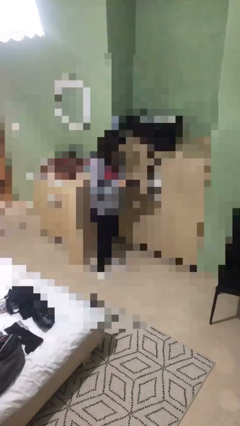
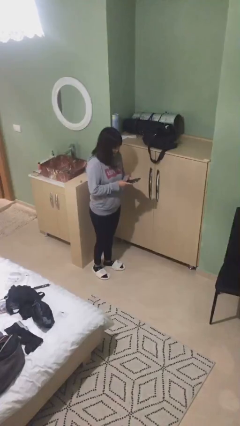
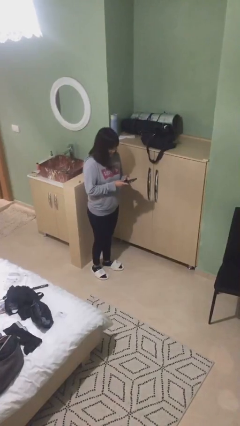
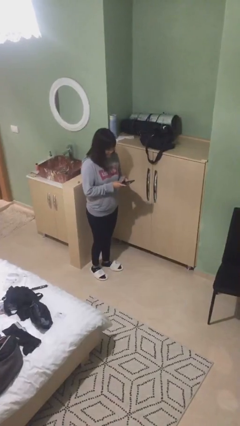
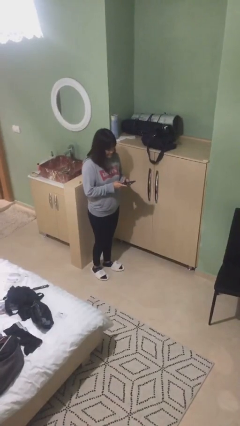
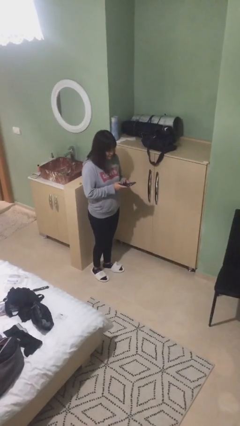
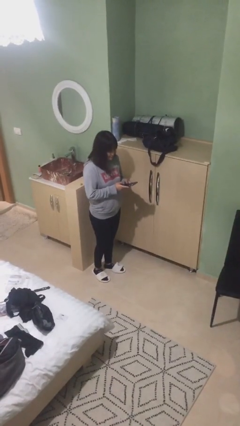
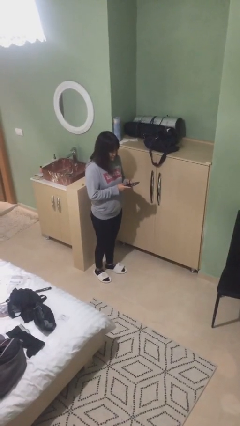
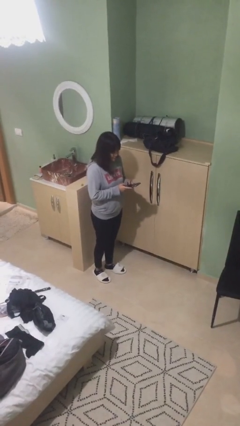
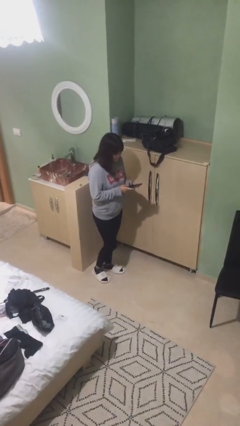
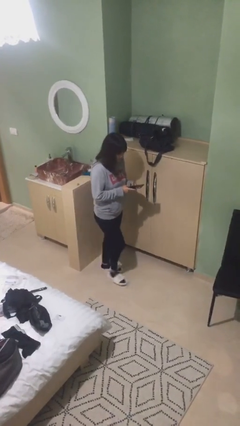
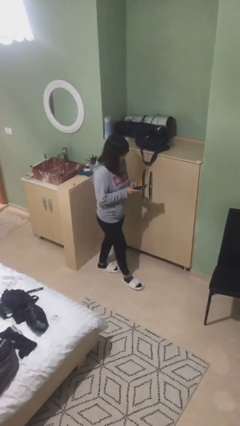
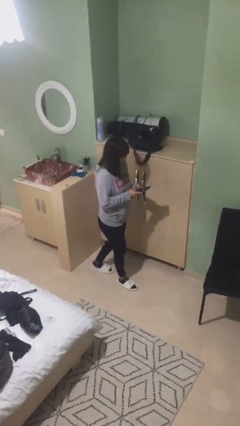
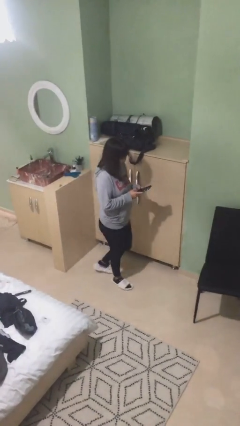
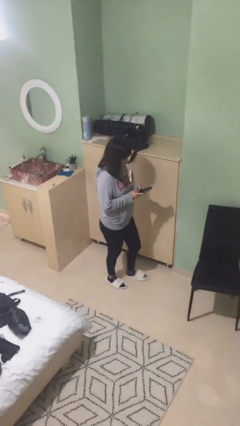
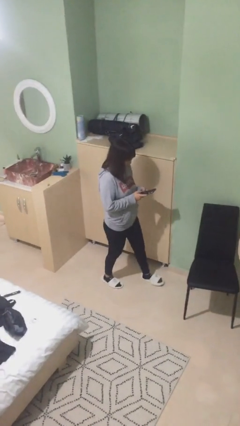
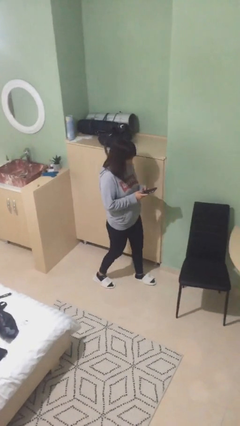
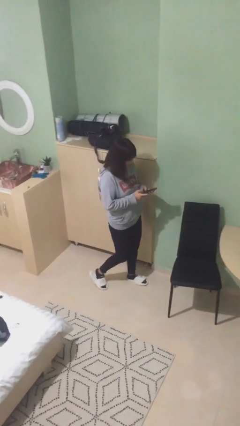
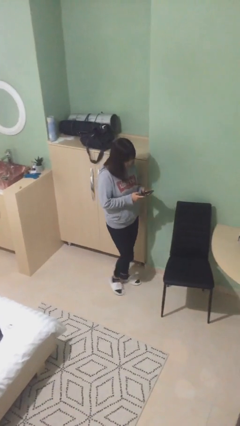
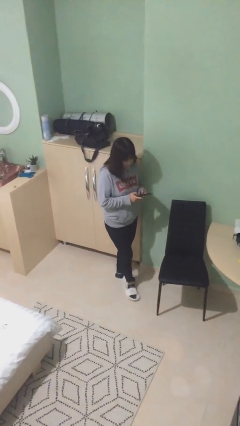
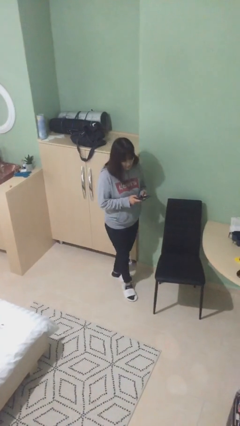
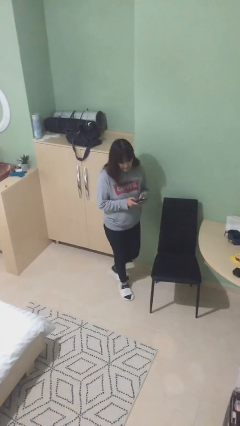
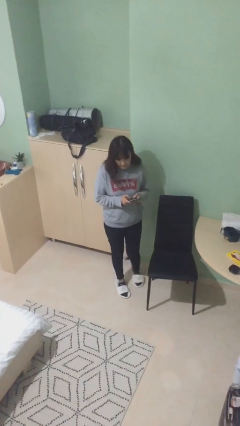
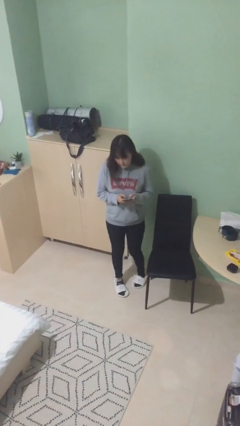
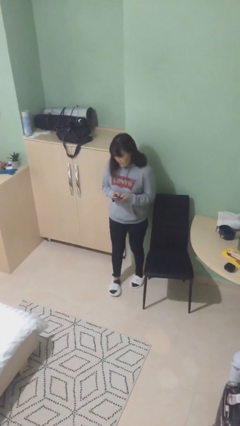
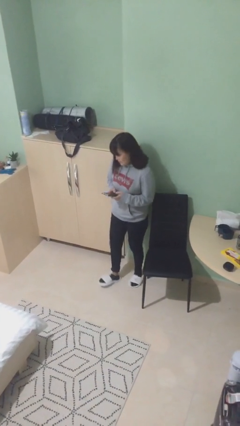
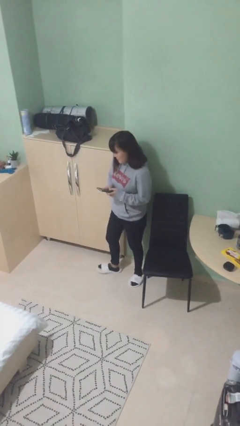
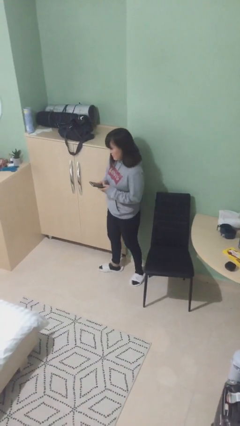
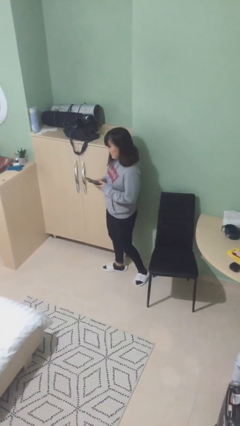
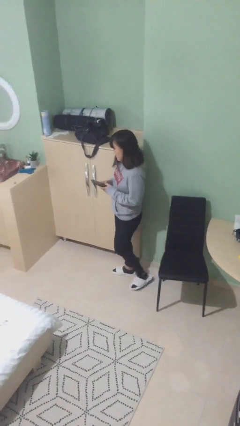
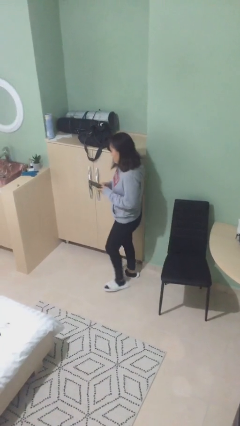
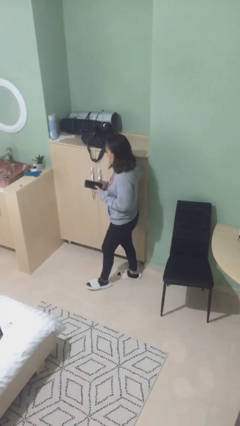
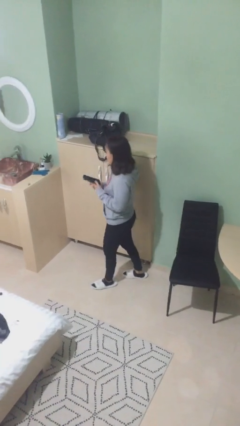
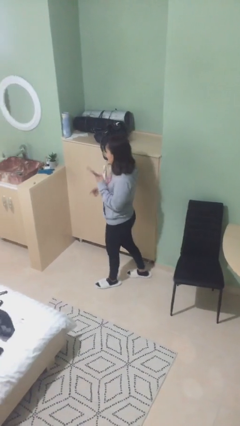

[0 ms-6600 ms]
person texts on phone

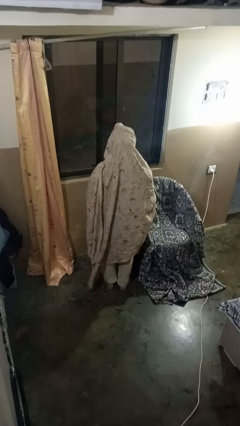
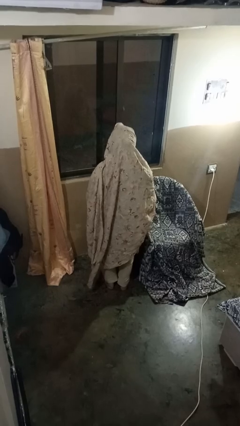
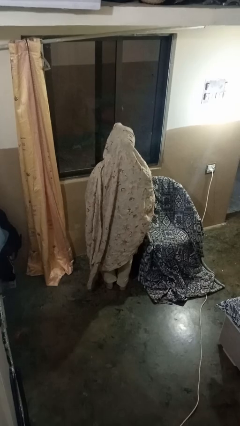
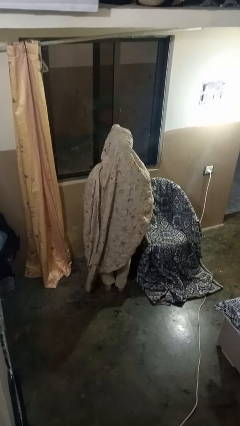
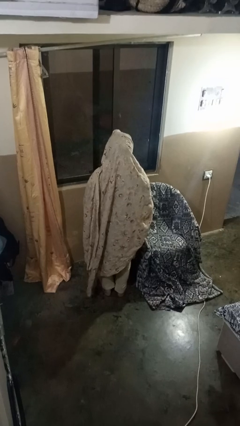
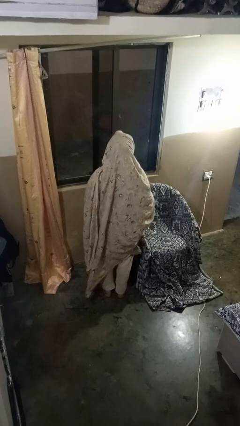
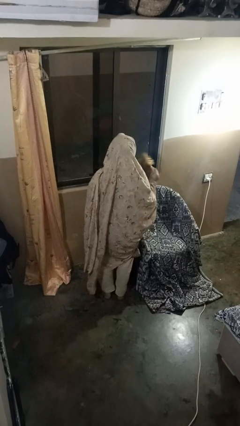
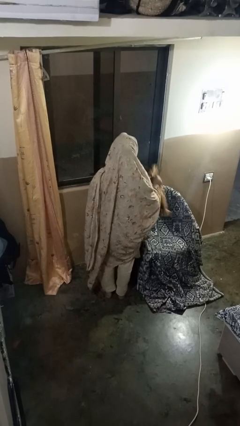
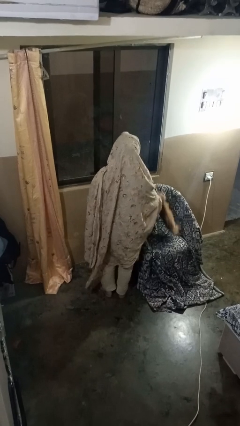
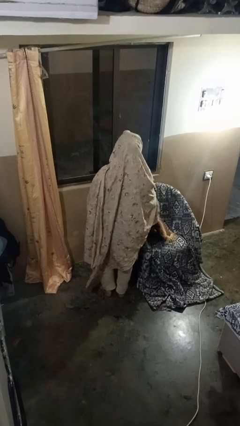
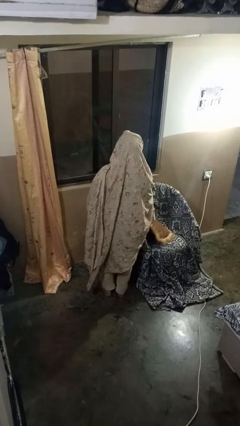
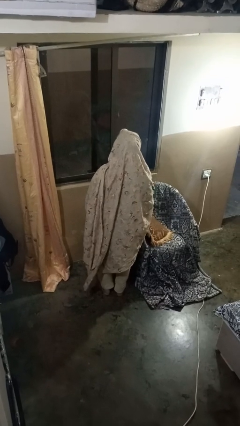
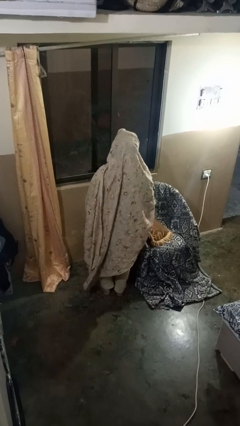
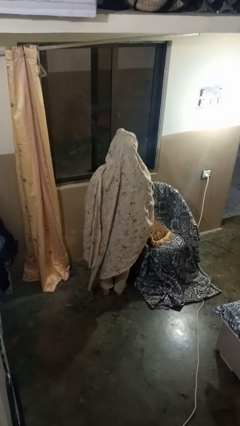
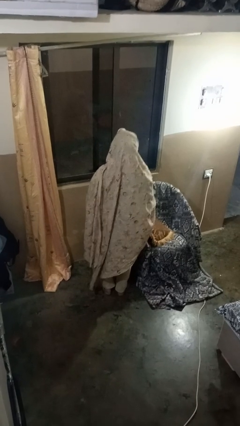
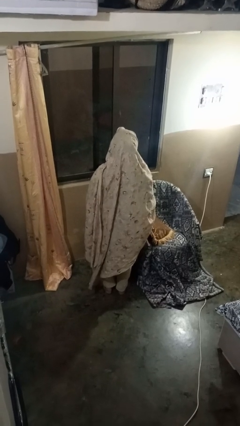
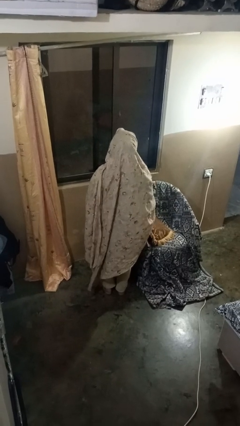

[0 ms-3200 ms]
person puts down object on couch

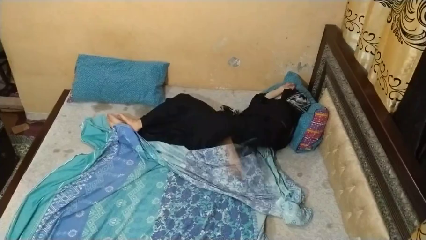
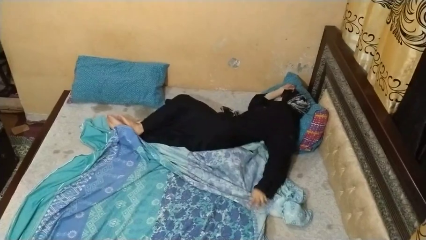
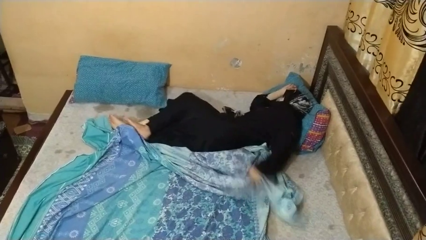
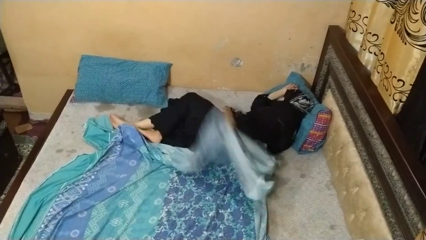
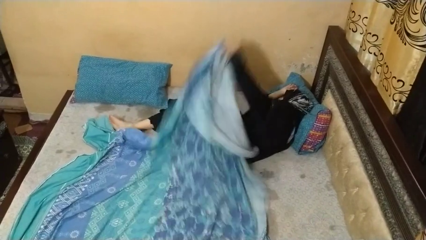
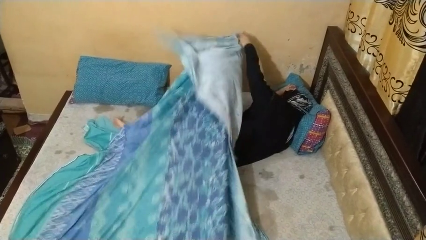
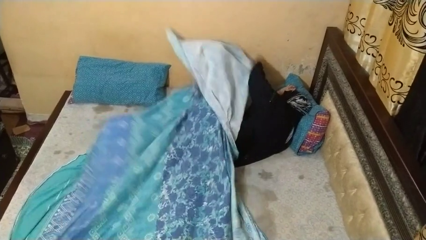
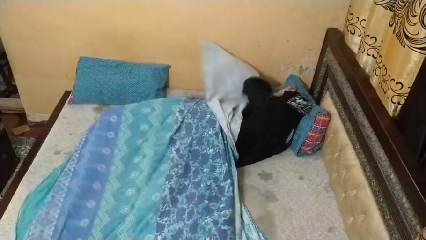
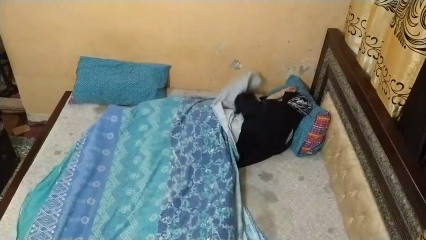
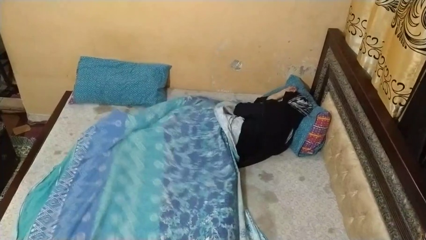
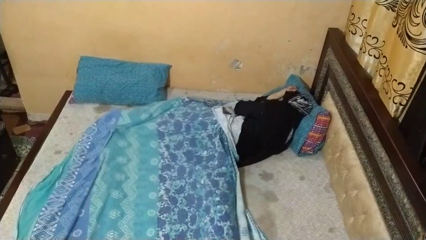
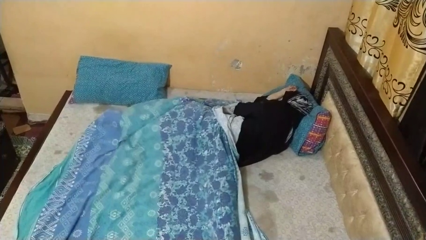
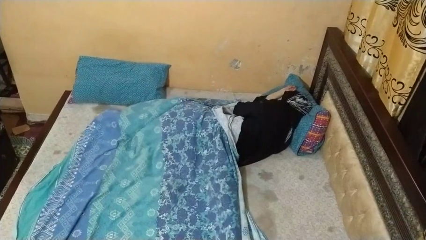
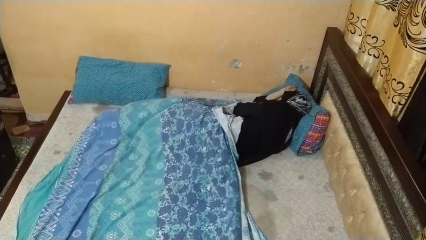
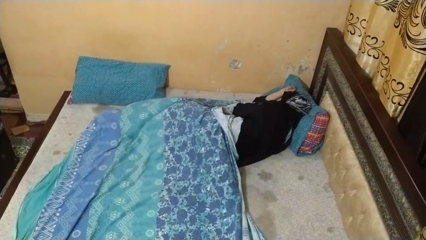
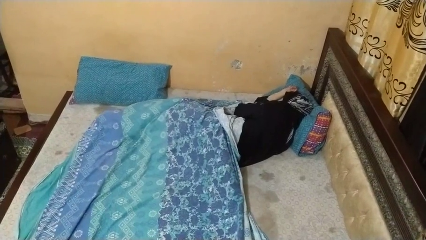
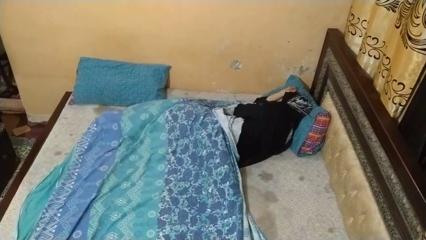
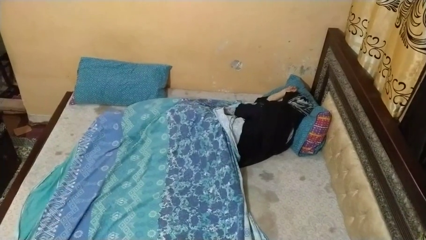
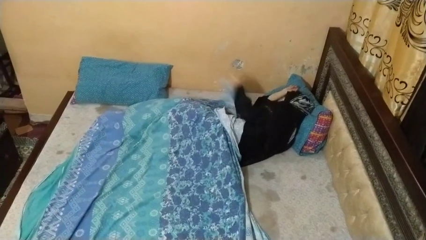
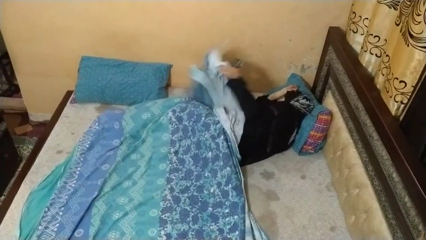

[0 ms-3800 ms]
person covers with bedsheets

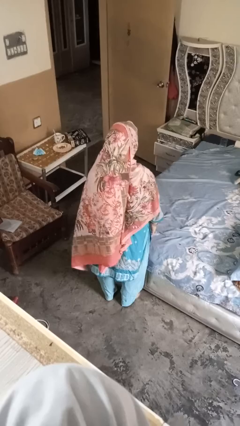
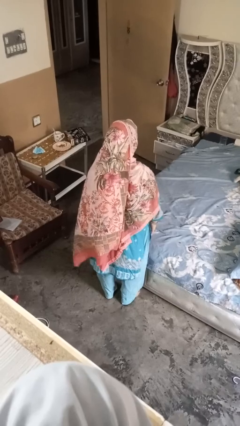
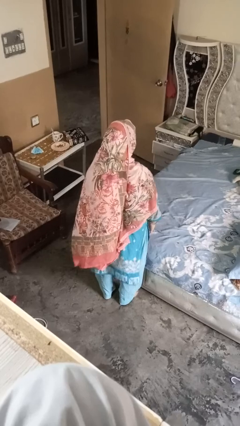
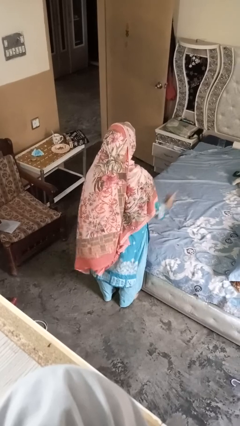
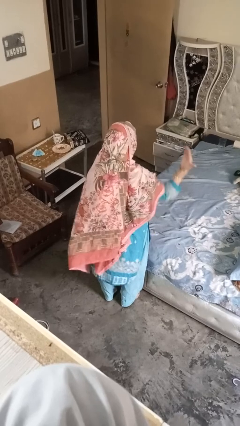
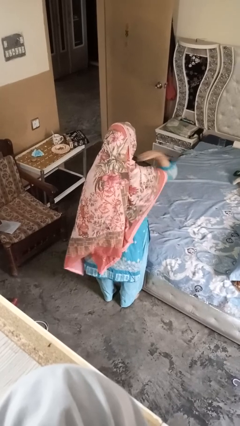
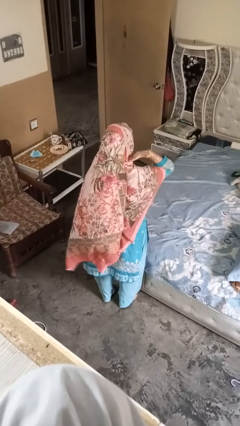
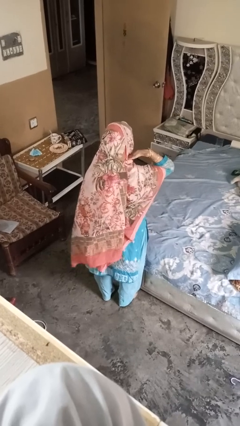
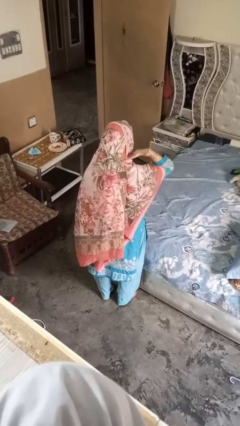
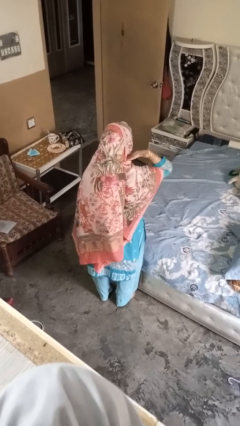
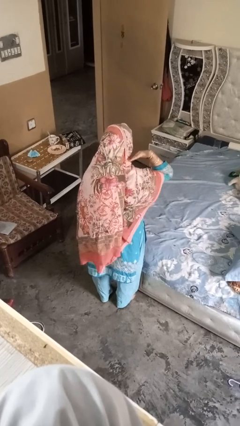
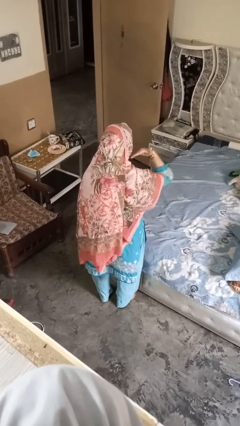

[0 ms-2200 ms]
person gestures cut

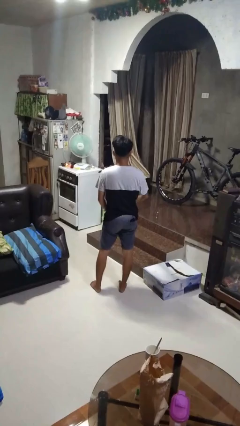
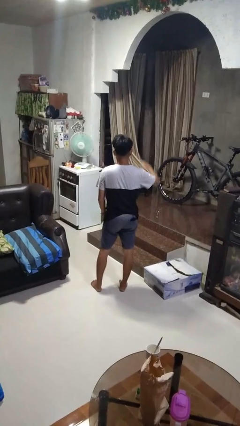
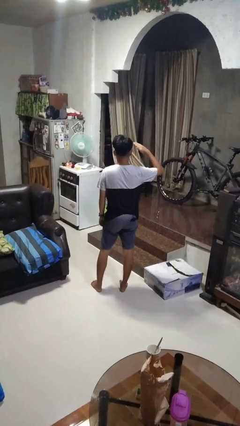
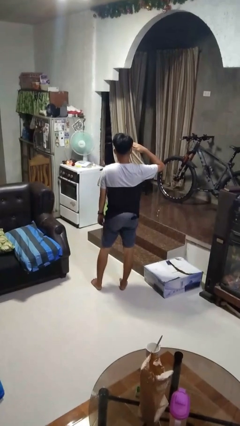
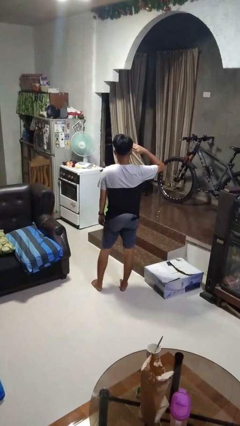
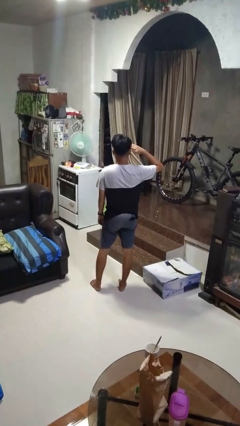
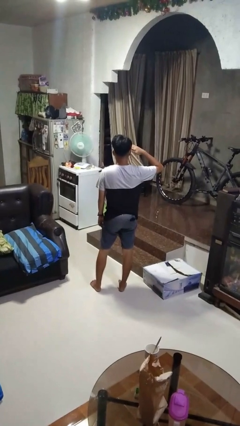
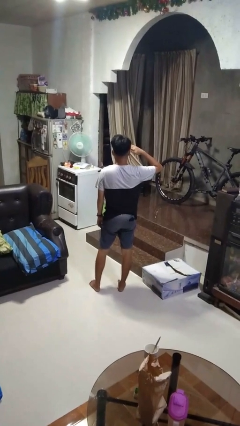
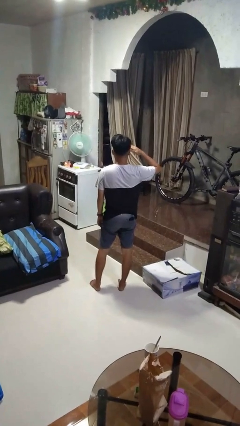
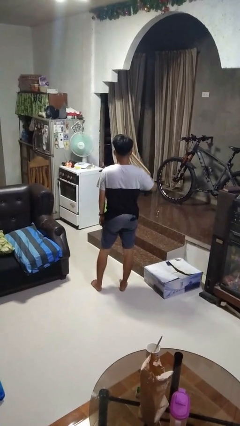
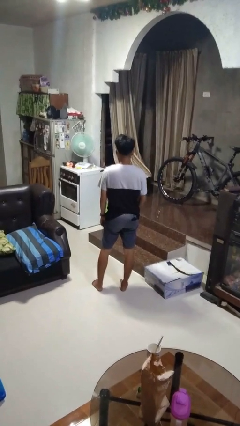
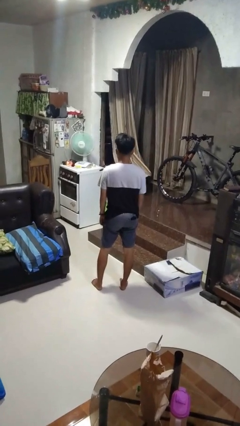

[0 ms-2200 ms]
person salutes
